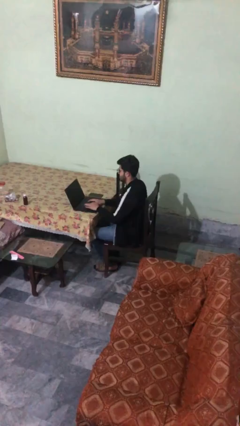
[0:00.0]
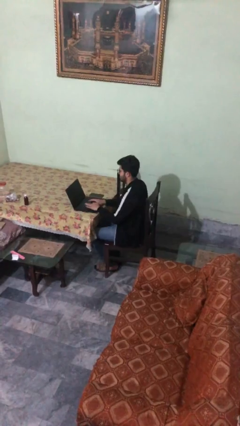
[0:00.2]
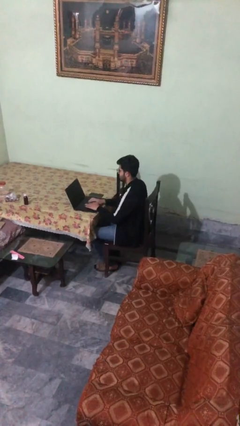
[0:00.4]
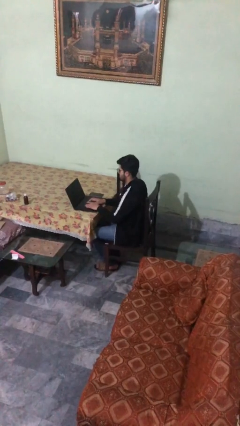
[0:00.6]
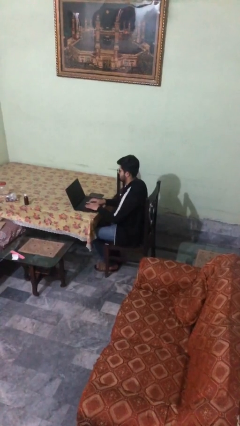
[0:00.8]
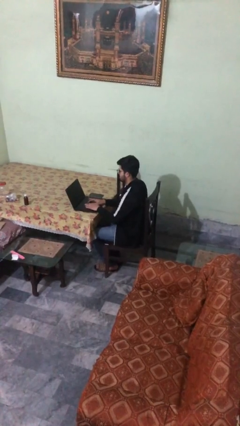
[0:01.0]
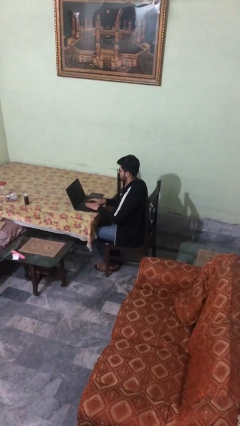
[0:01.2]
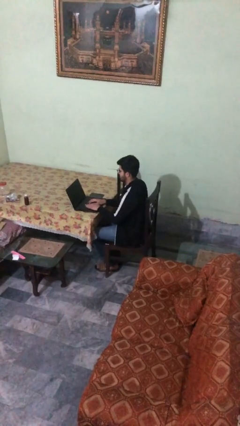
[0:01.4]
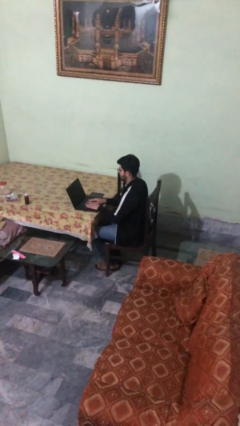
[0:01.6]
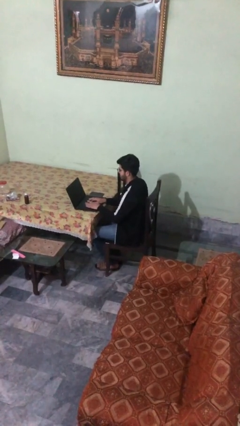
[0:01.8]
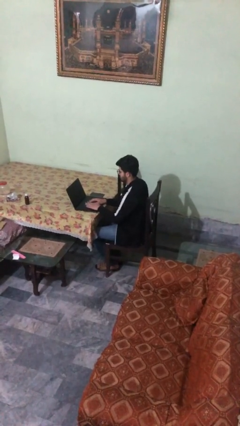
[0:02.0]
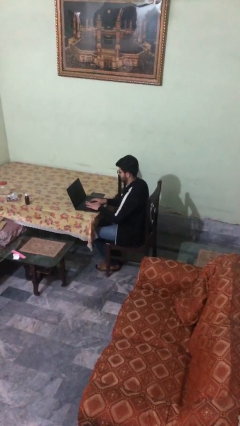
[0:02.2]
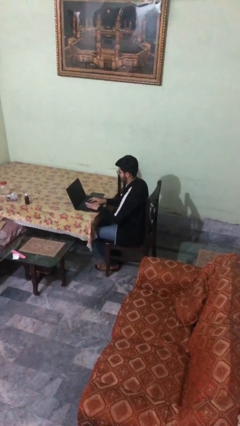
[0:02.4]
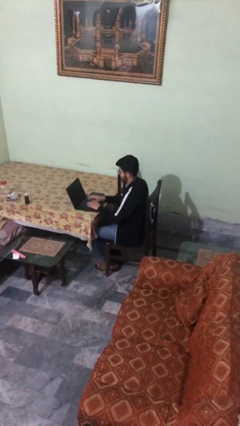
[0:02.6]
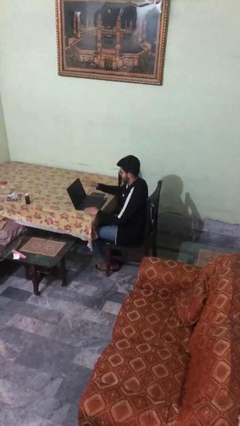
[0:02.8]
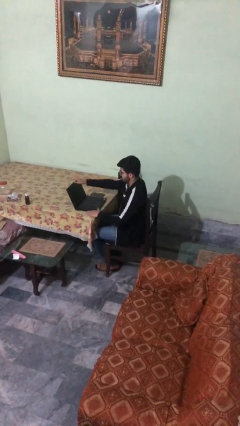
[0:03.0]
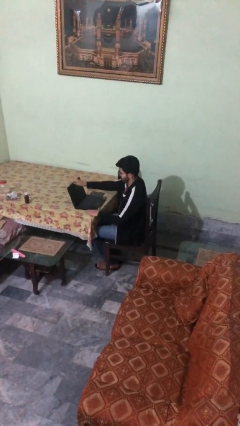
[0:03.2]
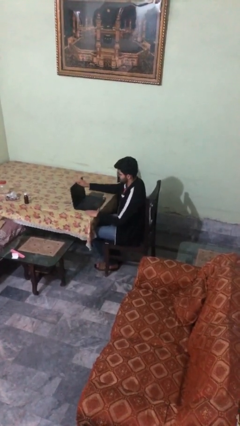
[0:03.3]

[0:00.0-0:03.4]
person interacts with laptop

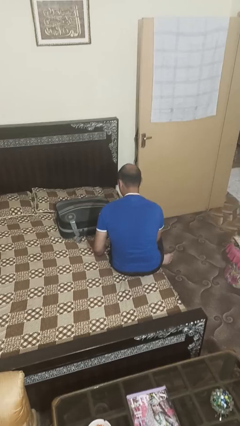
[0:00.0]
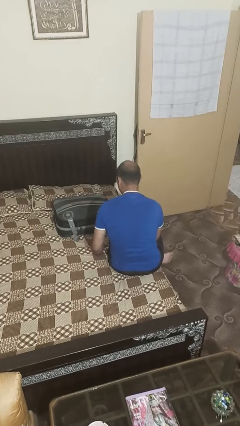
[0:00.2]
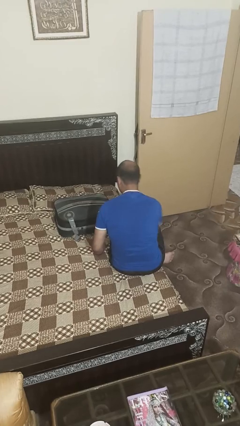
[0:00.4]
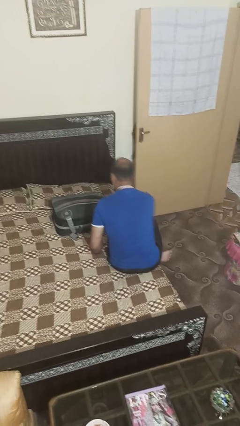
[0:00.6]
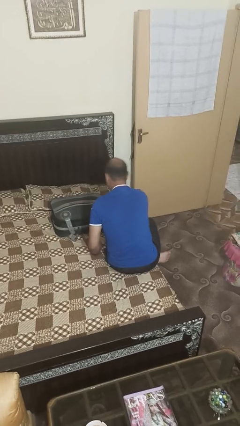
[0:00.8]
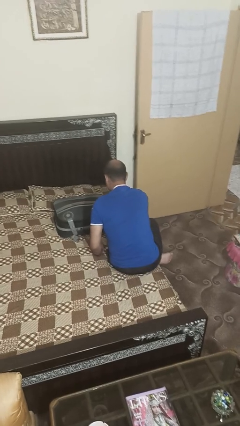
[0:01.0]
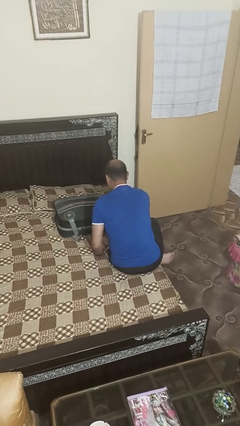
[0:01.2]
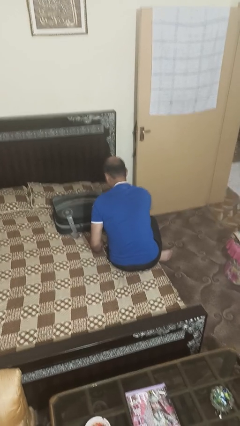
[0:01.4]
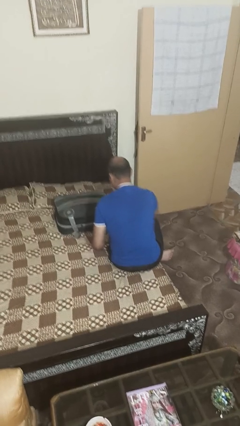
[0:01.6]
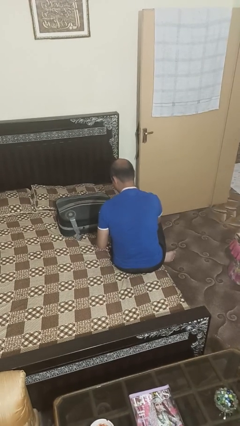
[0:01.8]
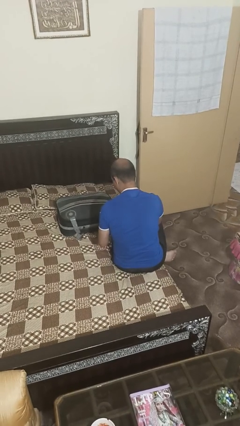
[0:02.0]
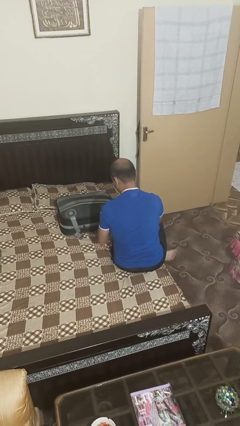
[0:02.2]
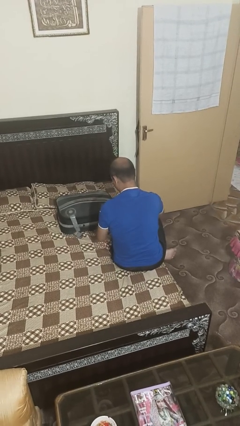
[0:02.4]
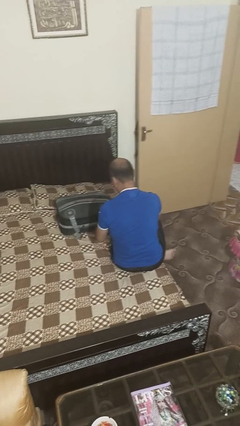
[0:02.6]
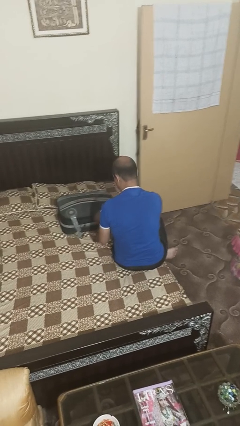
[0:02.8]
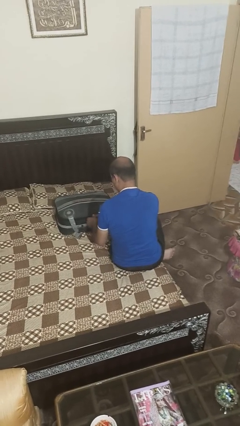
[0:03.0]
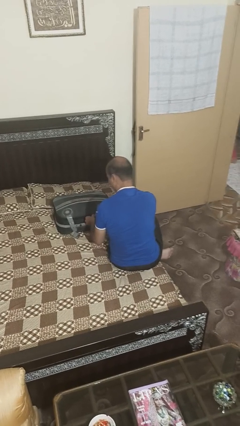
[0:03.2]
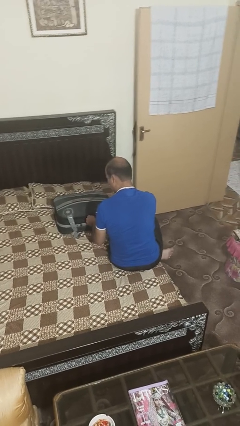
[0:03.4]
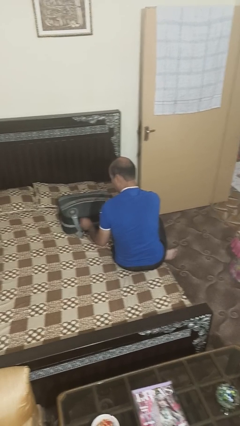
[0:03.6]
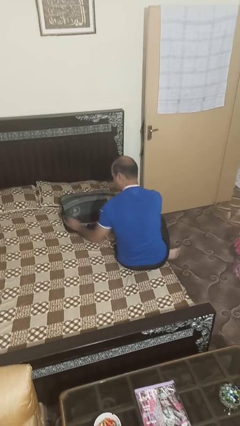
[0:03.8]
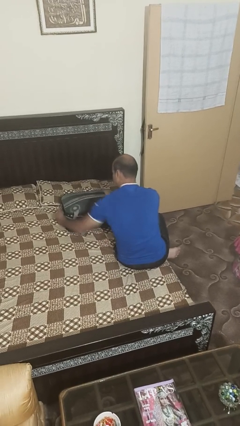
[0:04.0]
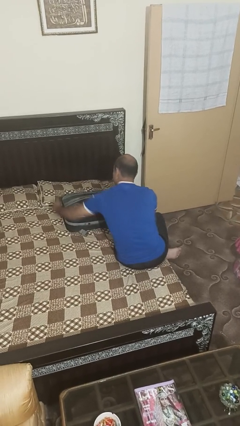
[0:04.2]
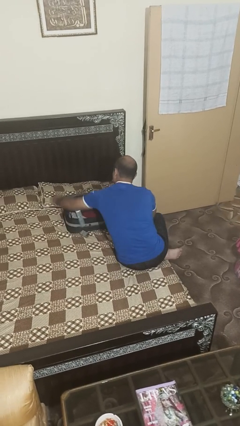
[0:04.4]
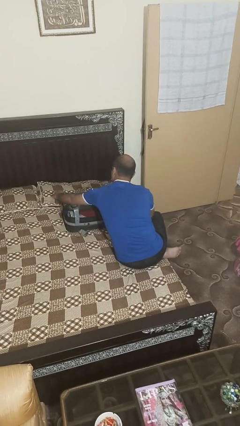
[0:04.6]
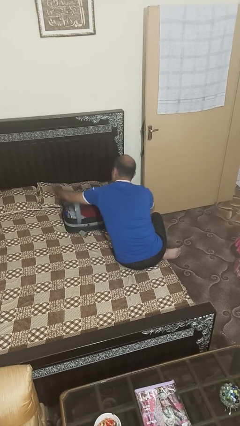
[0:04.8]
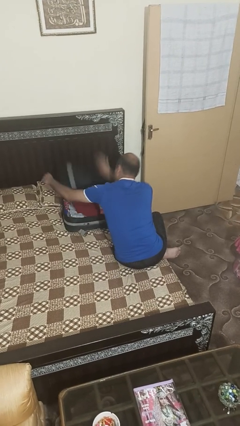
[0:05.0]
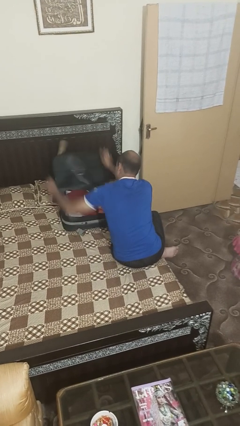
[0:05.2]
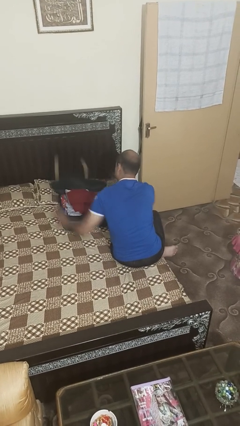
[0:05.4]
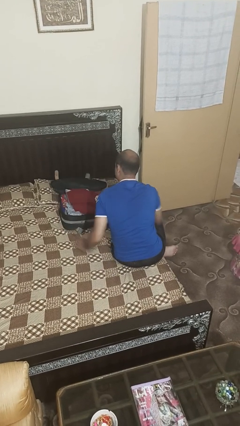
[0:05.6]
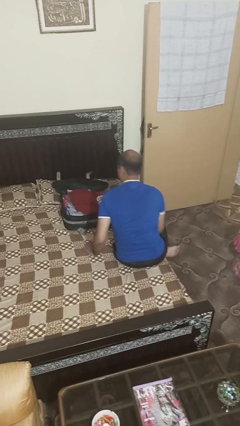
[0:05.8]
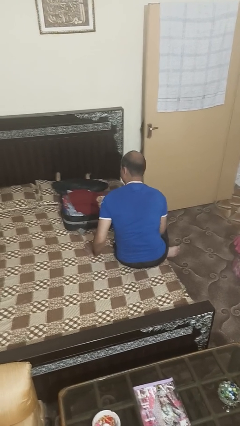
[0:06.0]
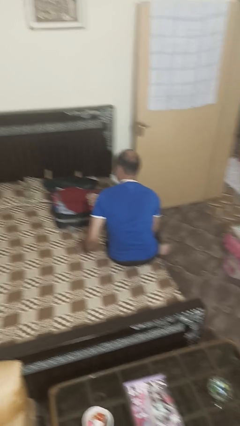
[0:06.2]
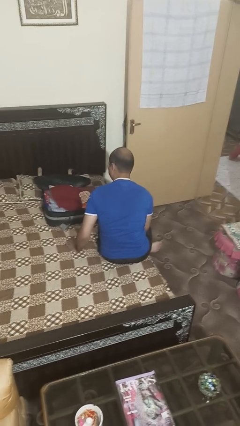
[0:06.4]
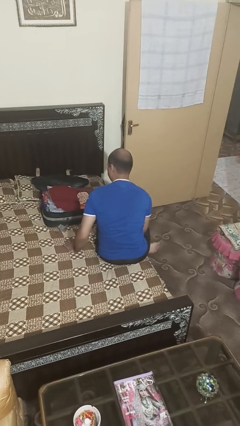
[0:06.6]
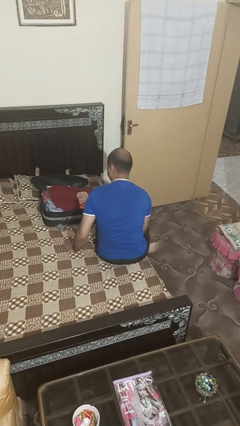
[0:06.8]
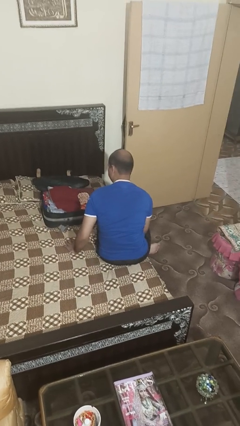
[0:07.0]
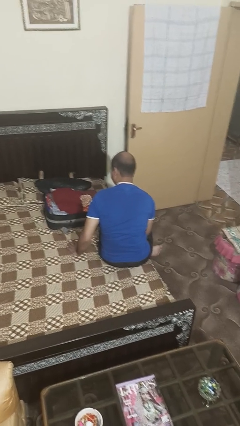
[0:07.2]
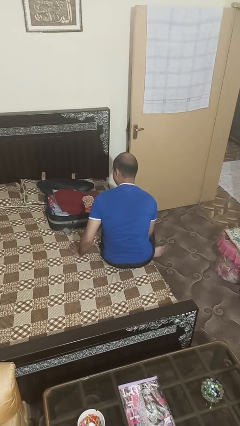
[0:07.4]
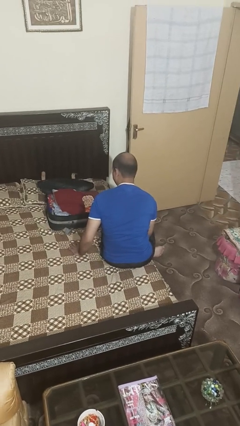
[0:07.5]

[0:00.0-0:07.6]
person opens suitcase

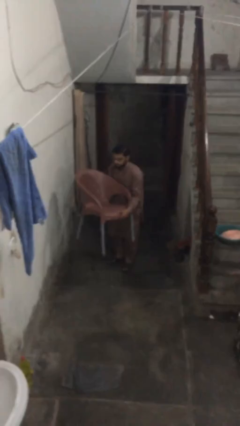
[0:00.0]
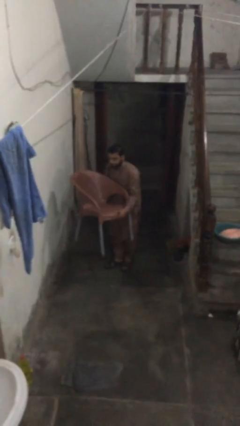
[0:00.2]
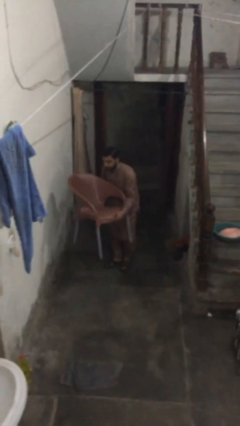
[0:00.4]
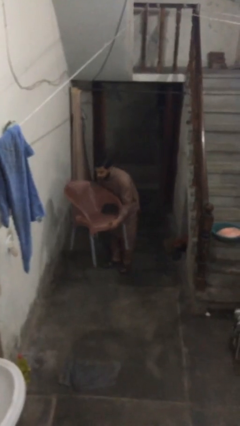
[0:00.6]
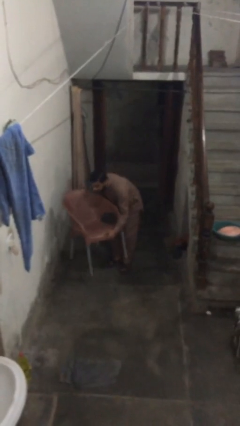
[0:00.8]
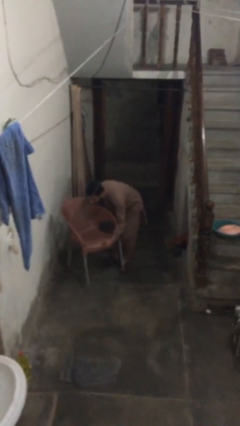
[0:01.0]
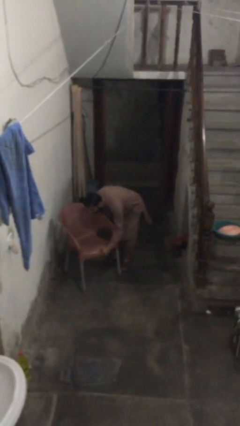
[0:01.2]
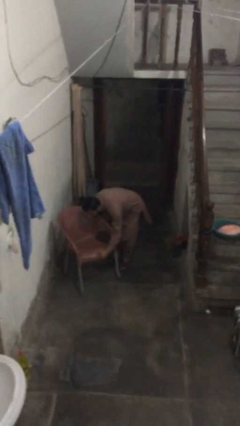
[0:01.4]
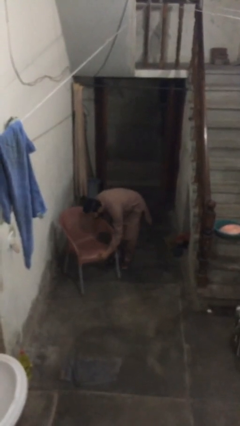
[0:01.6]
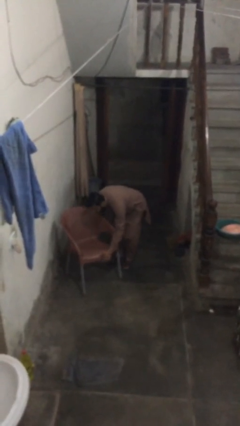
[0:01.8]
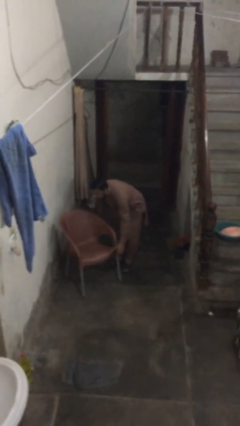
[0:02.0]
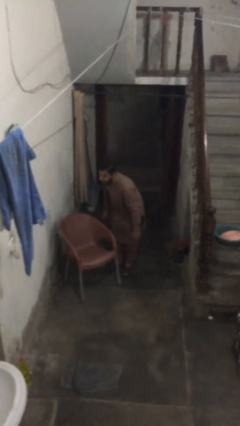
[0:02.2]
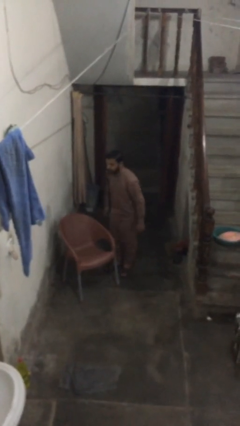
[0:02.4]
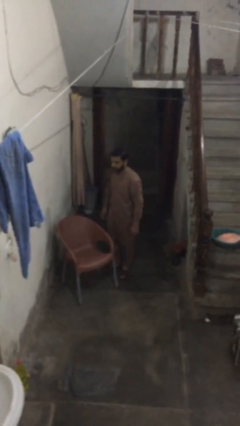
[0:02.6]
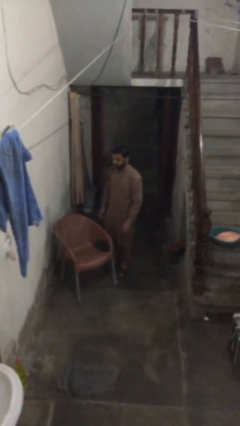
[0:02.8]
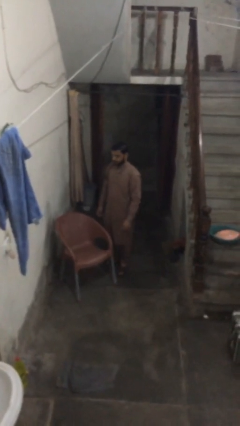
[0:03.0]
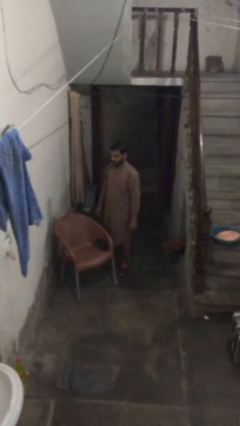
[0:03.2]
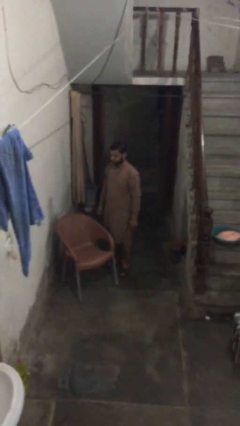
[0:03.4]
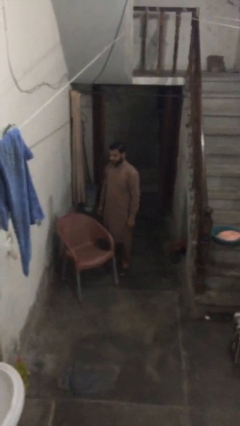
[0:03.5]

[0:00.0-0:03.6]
person puts down object on floor

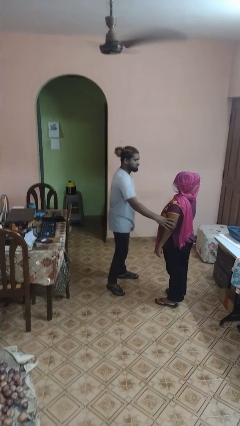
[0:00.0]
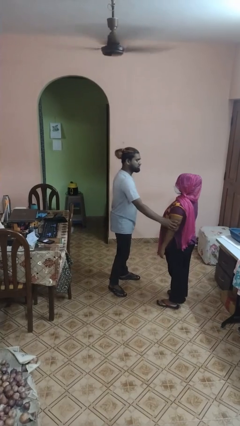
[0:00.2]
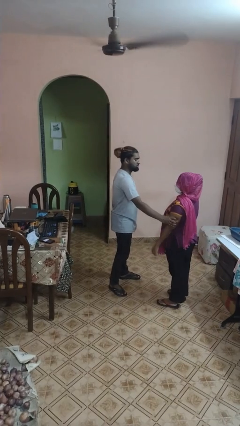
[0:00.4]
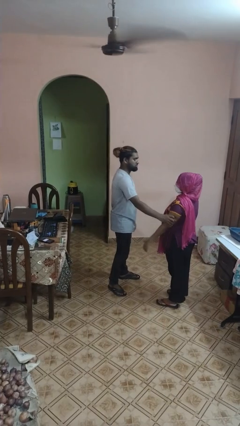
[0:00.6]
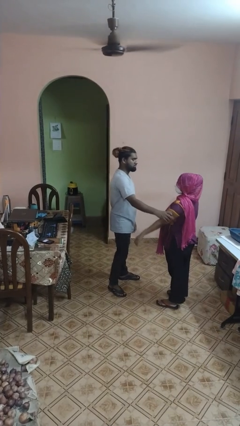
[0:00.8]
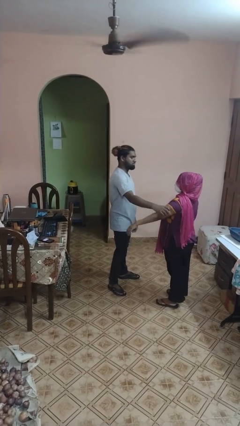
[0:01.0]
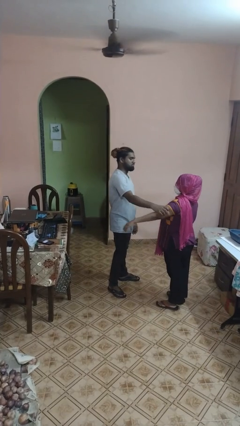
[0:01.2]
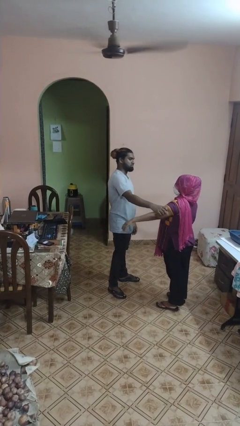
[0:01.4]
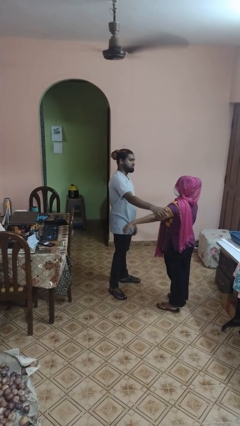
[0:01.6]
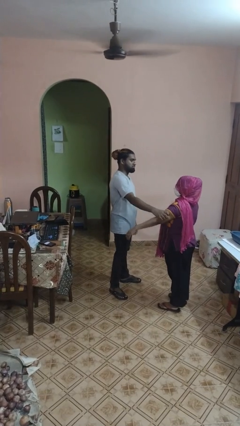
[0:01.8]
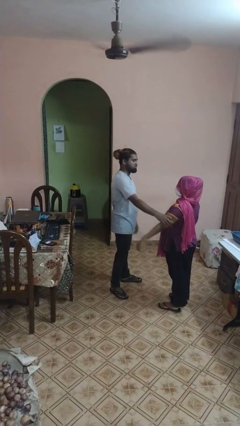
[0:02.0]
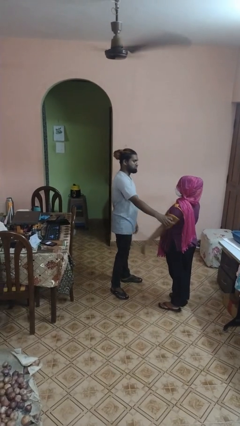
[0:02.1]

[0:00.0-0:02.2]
person grabs person by bicep

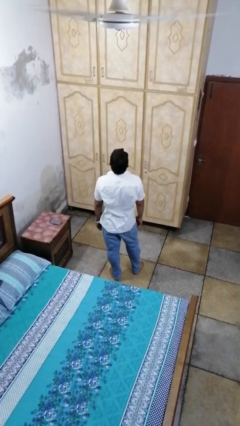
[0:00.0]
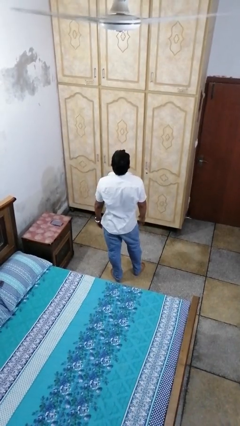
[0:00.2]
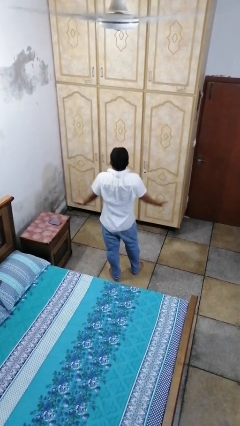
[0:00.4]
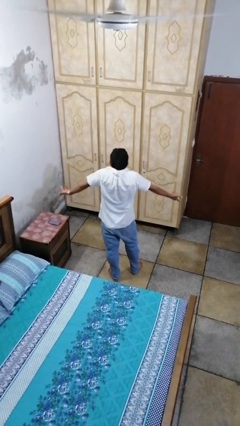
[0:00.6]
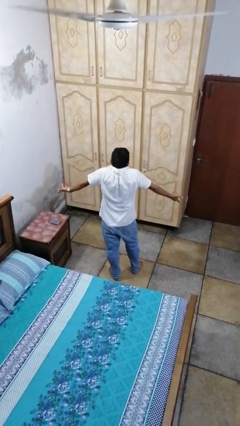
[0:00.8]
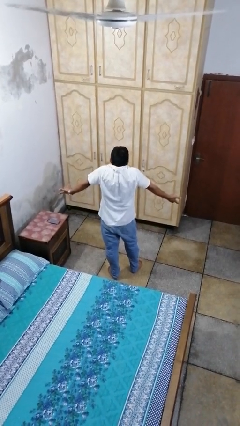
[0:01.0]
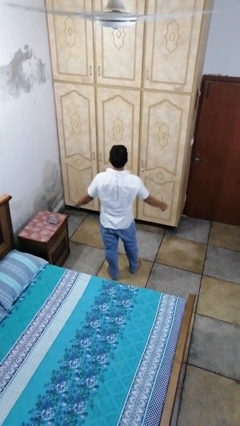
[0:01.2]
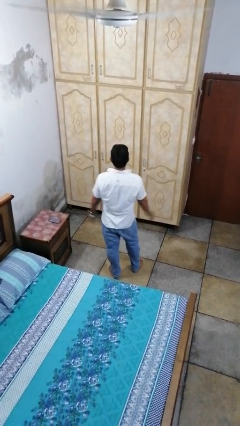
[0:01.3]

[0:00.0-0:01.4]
person shrugs
